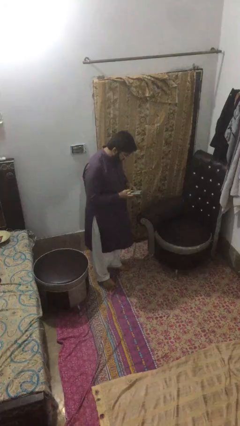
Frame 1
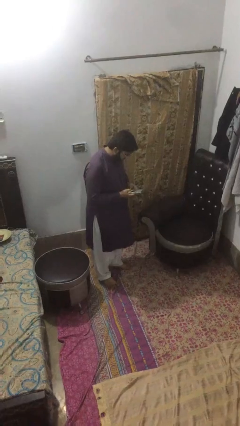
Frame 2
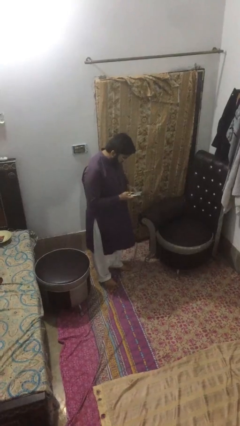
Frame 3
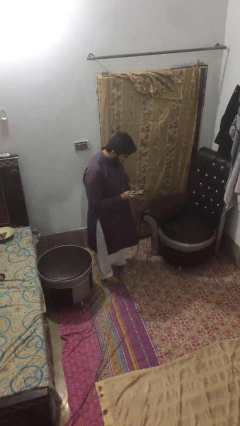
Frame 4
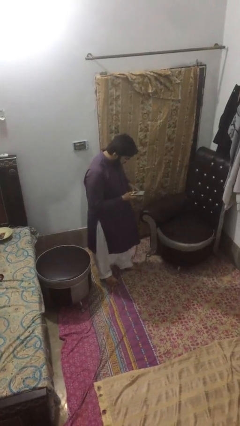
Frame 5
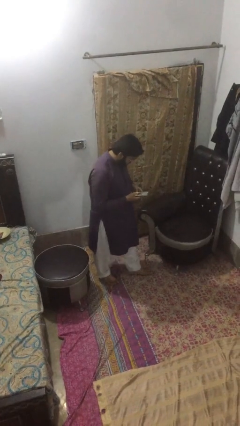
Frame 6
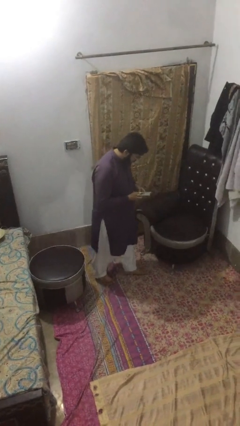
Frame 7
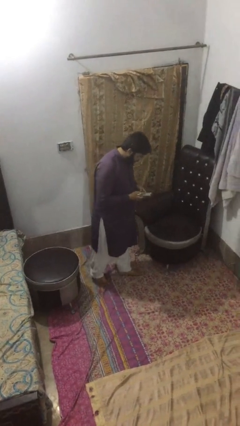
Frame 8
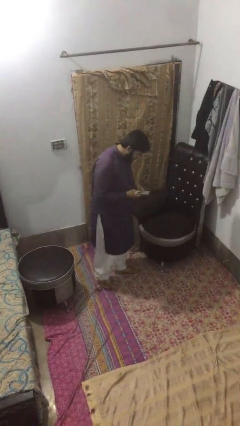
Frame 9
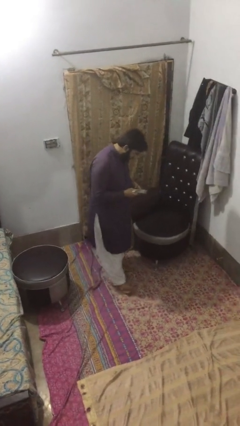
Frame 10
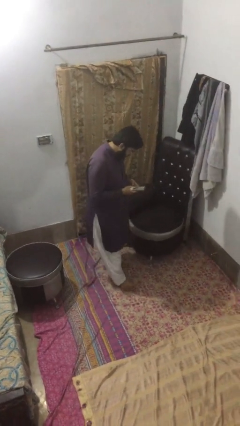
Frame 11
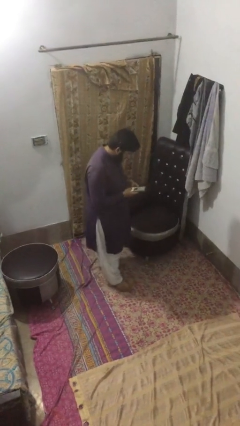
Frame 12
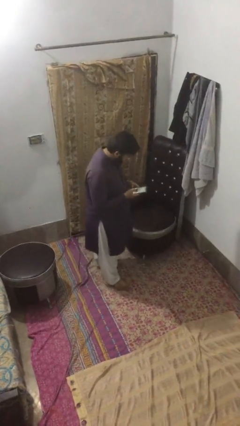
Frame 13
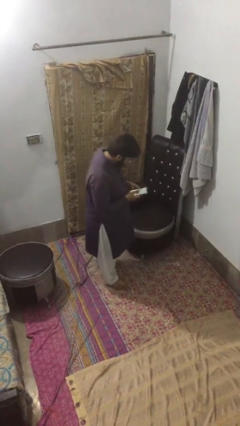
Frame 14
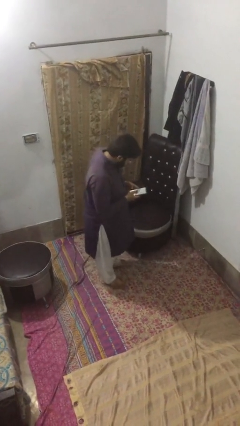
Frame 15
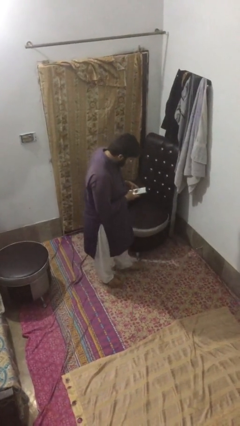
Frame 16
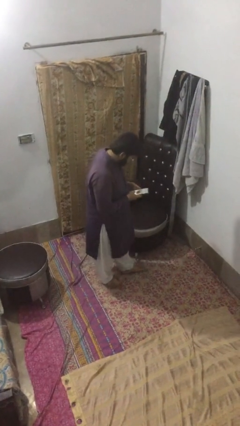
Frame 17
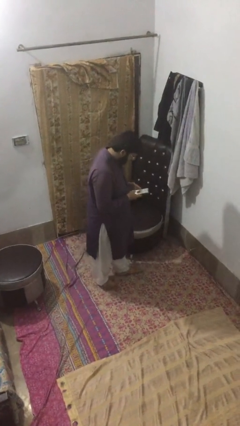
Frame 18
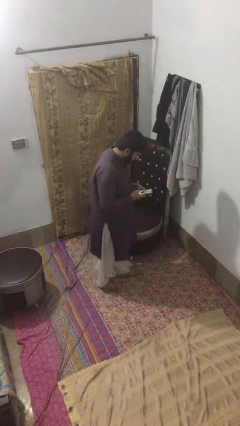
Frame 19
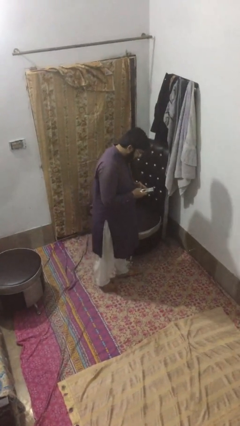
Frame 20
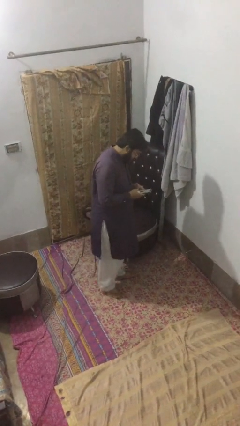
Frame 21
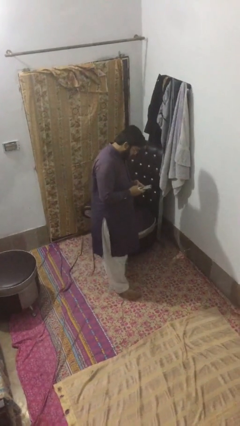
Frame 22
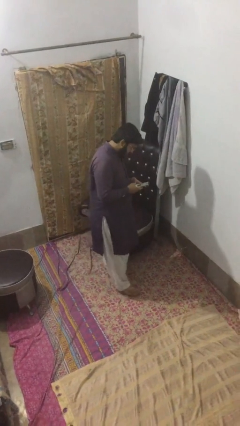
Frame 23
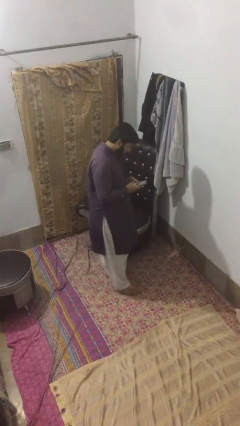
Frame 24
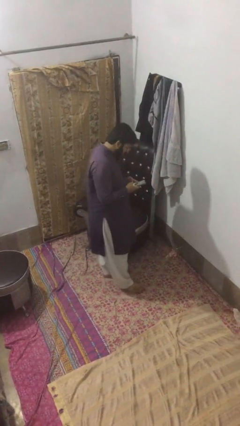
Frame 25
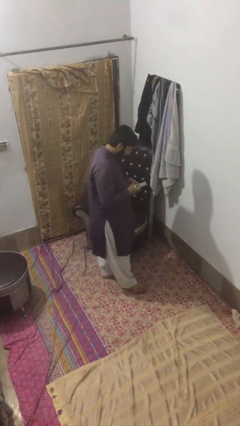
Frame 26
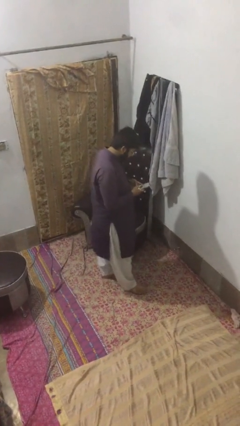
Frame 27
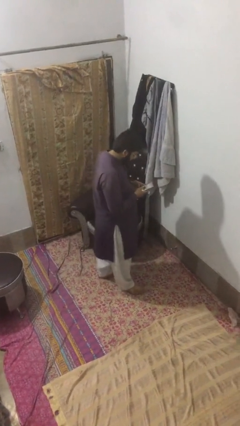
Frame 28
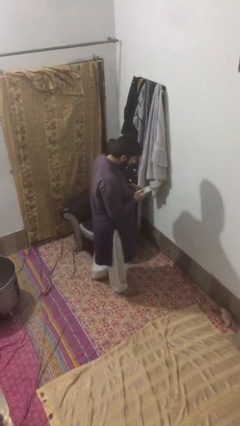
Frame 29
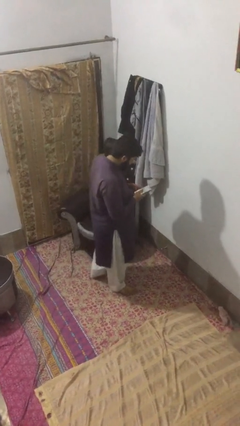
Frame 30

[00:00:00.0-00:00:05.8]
person texts on phone

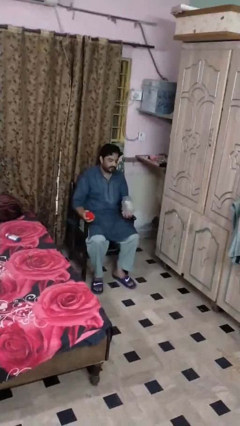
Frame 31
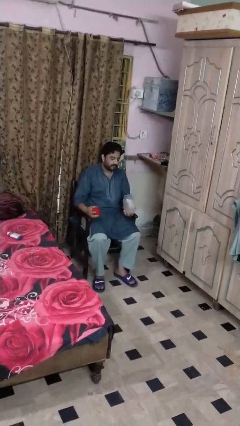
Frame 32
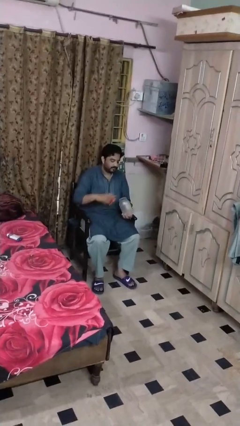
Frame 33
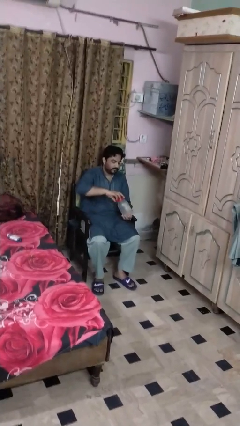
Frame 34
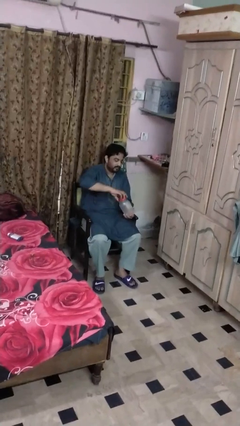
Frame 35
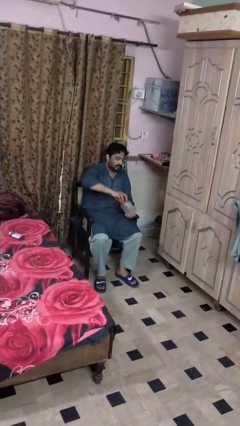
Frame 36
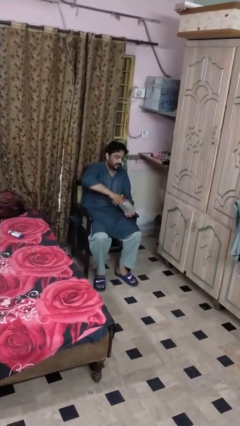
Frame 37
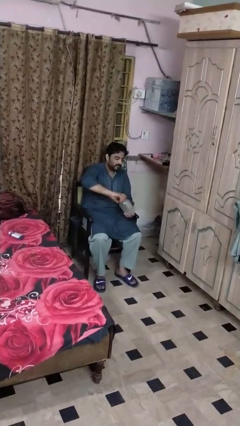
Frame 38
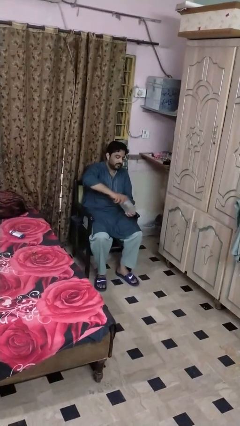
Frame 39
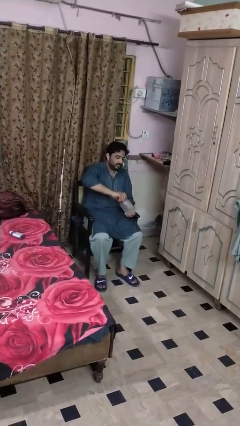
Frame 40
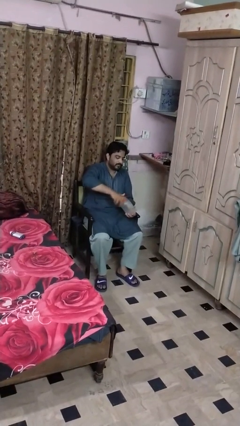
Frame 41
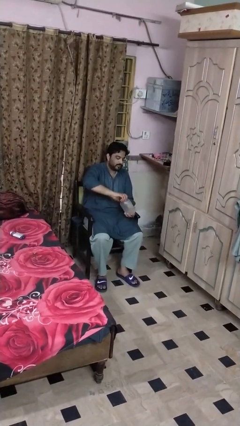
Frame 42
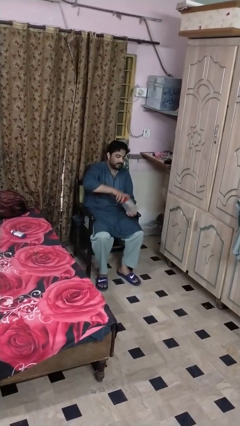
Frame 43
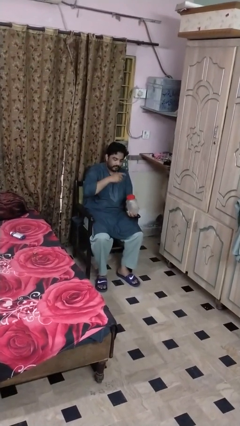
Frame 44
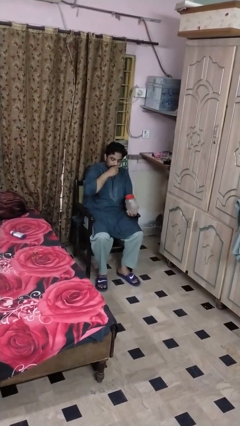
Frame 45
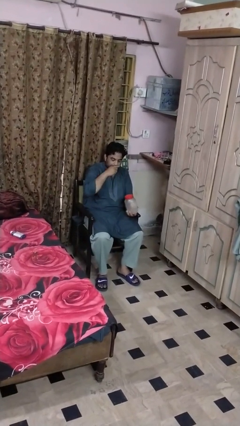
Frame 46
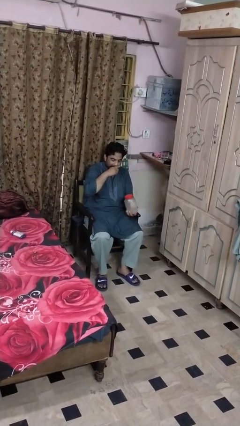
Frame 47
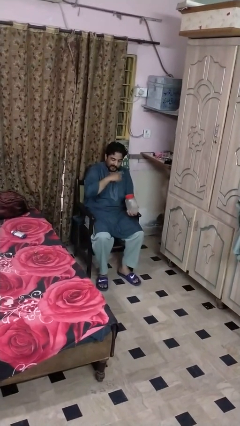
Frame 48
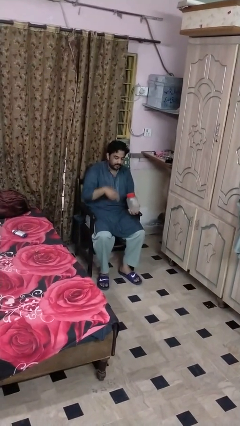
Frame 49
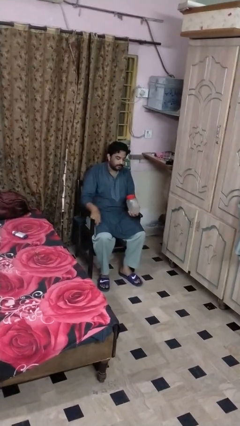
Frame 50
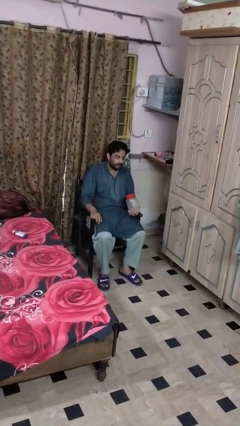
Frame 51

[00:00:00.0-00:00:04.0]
person closes jar

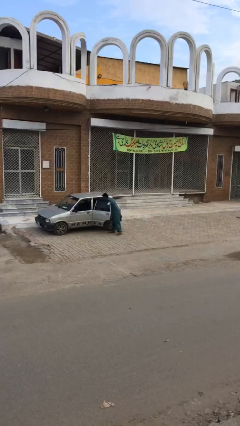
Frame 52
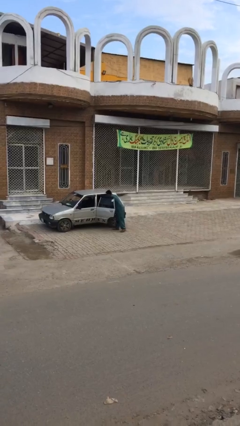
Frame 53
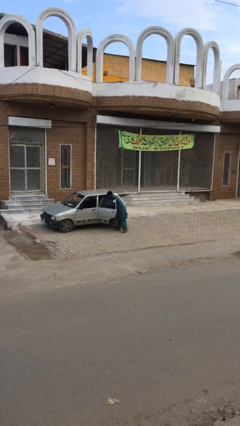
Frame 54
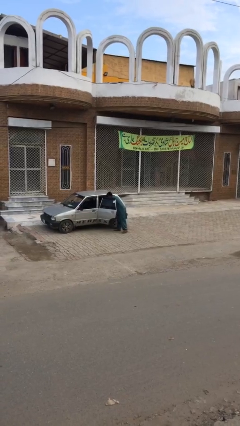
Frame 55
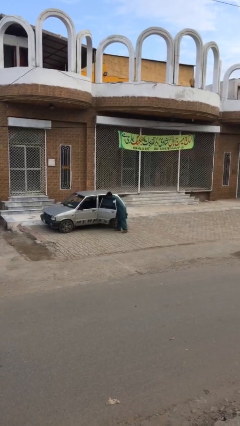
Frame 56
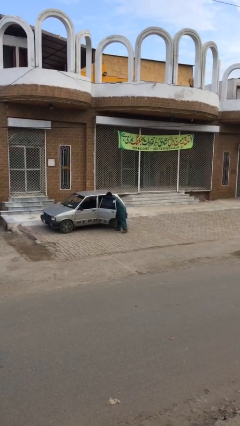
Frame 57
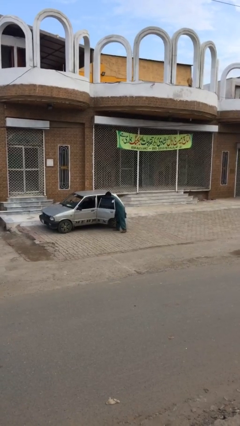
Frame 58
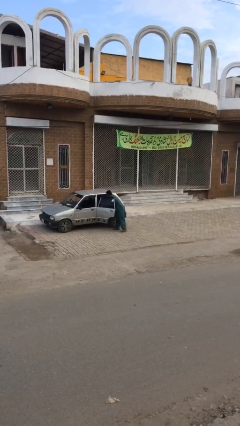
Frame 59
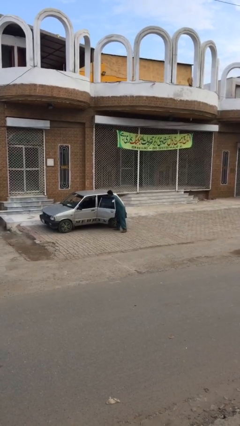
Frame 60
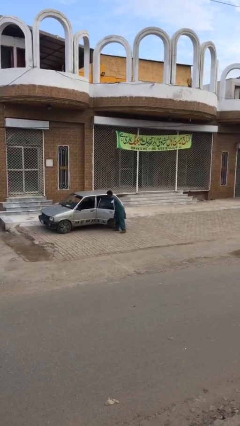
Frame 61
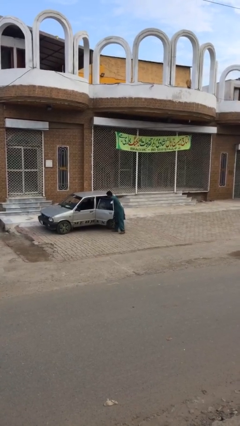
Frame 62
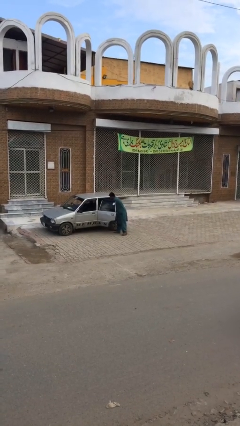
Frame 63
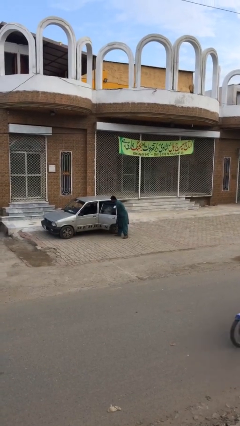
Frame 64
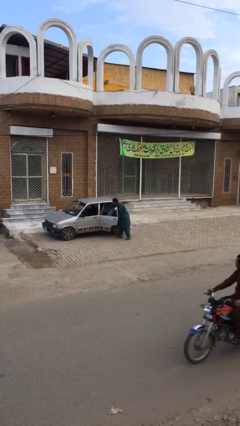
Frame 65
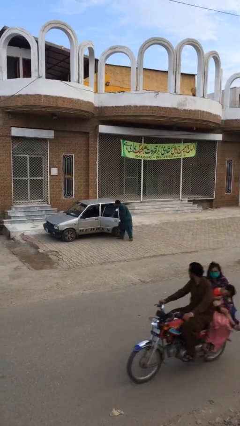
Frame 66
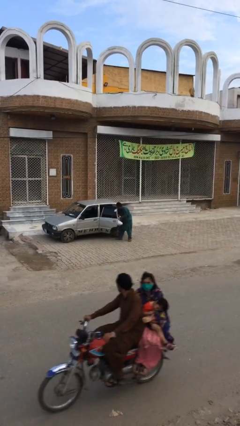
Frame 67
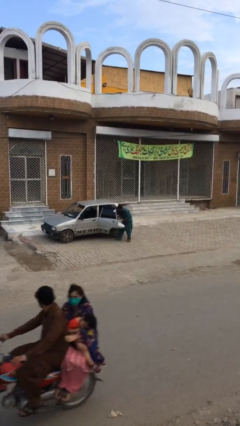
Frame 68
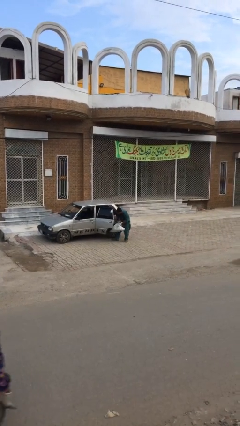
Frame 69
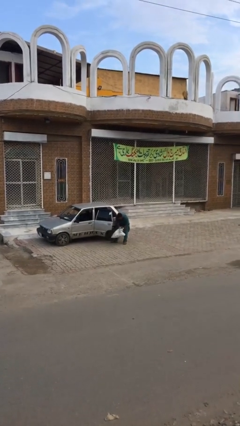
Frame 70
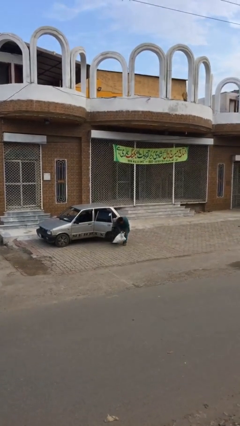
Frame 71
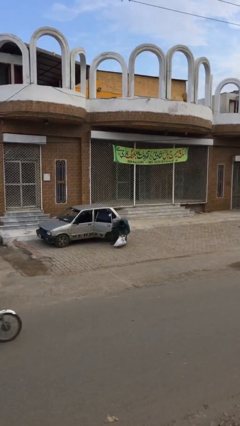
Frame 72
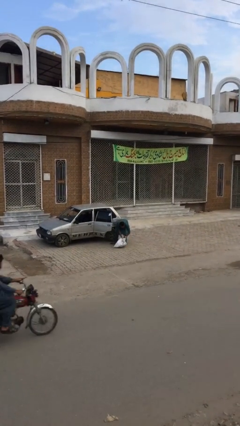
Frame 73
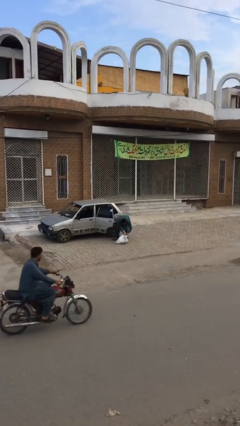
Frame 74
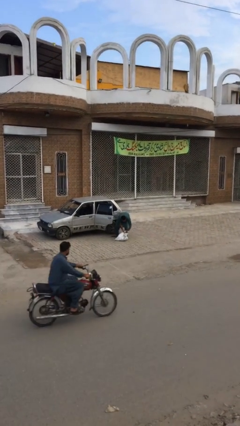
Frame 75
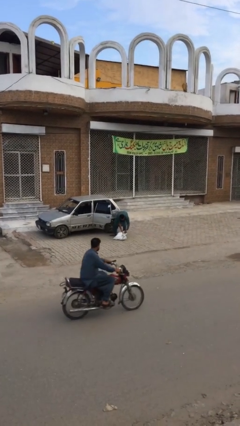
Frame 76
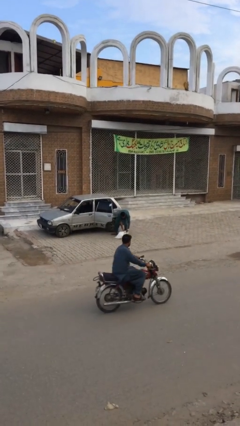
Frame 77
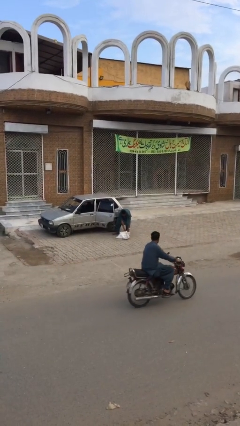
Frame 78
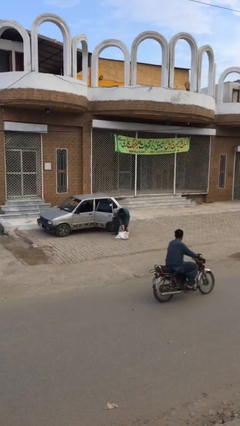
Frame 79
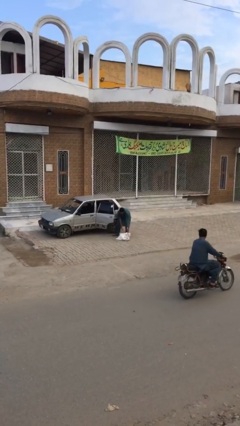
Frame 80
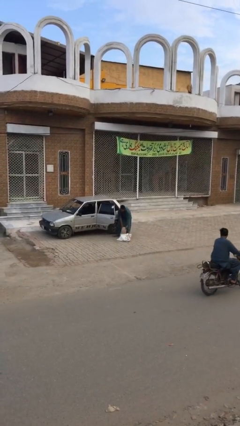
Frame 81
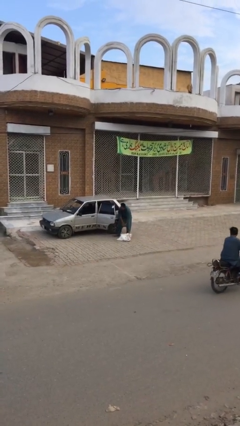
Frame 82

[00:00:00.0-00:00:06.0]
person unloads car

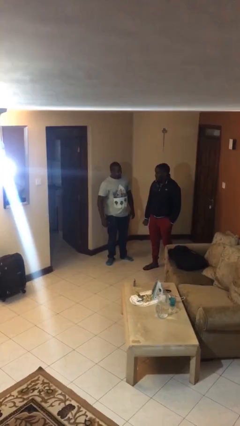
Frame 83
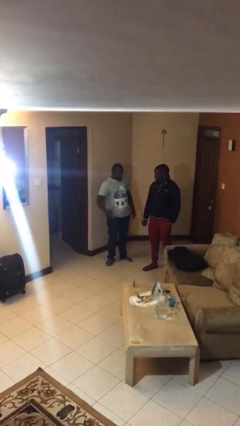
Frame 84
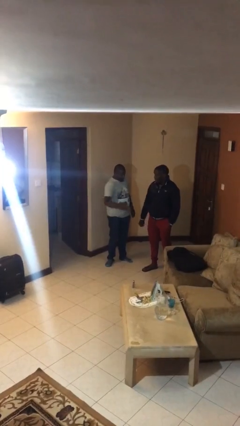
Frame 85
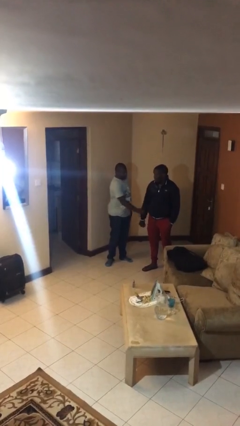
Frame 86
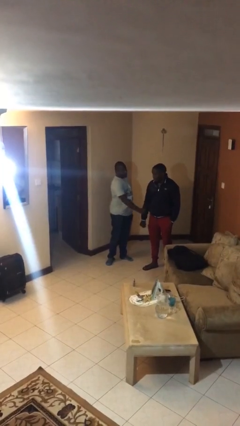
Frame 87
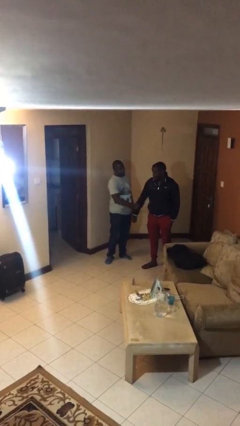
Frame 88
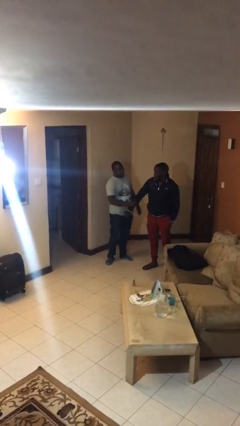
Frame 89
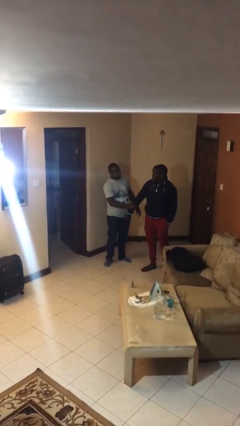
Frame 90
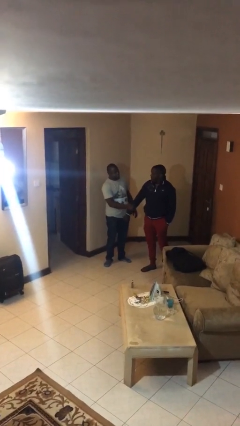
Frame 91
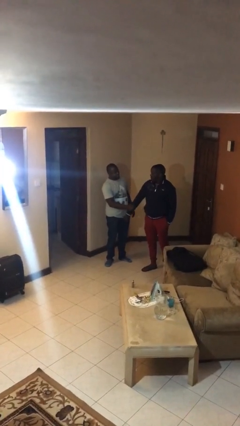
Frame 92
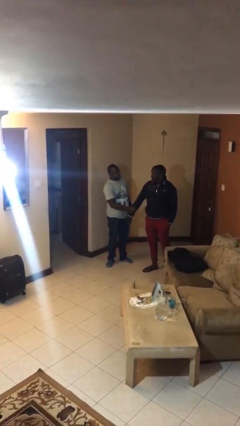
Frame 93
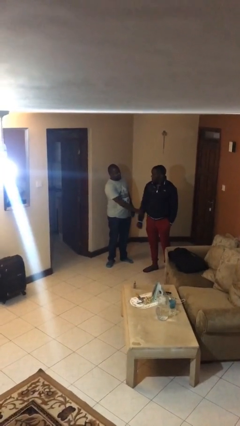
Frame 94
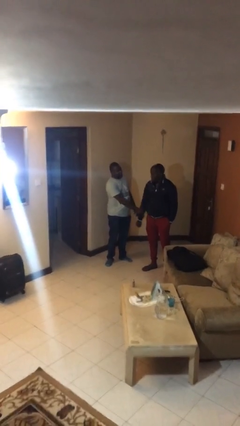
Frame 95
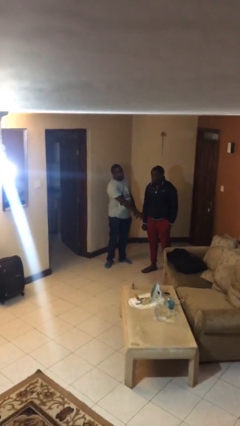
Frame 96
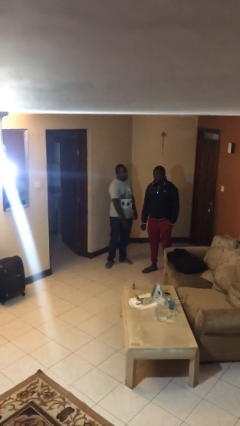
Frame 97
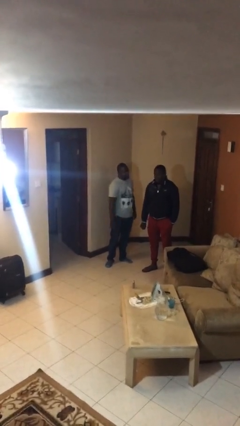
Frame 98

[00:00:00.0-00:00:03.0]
person grabs person by forearm
